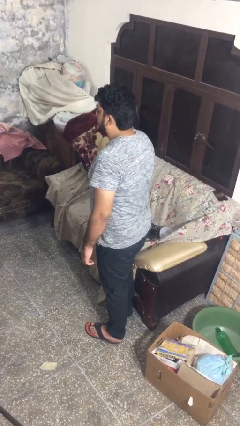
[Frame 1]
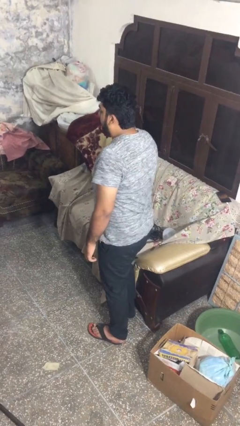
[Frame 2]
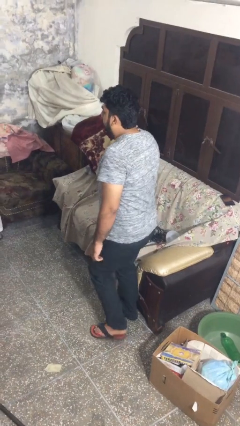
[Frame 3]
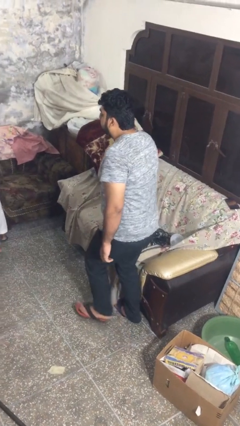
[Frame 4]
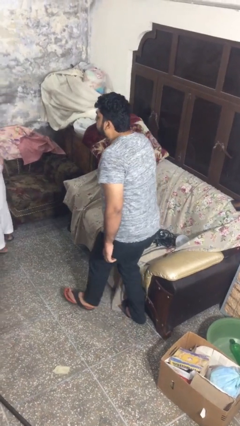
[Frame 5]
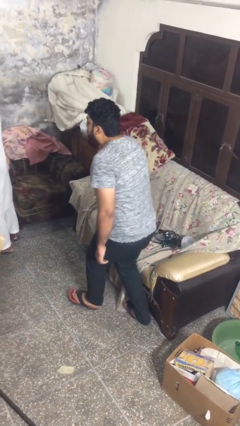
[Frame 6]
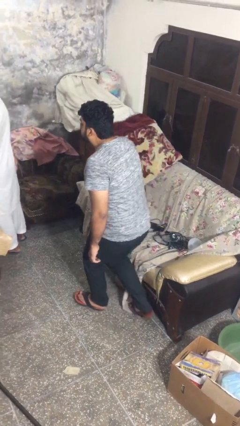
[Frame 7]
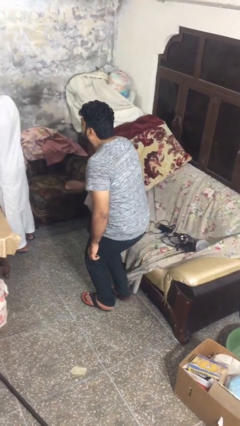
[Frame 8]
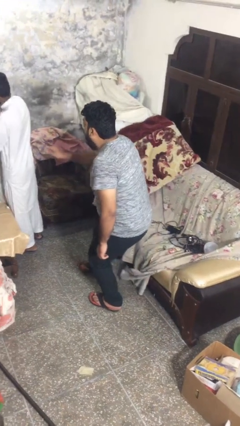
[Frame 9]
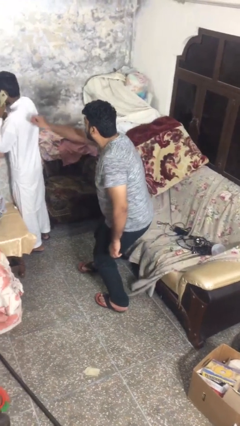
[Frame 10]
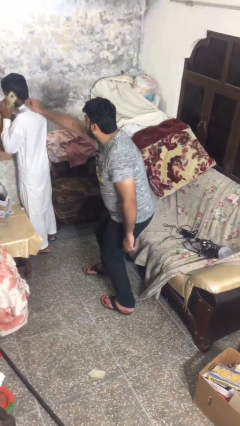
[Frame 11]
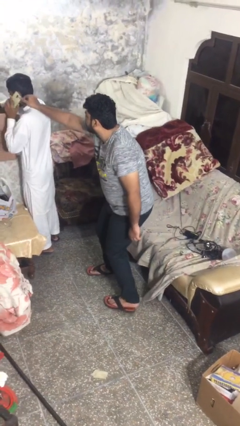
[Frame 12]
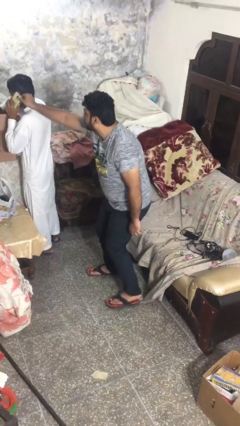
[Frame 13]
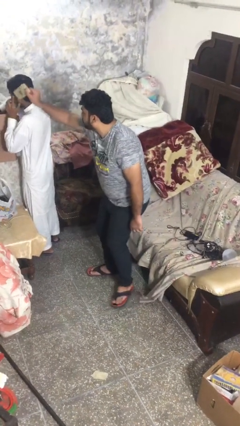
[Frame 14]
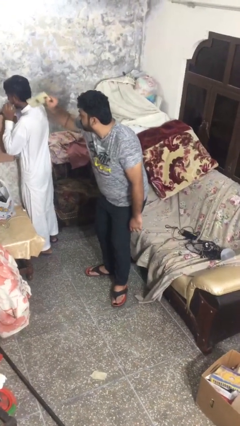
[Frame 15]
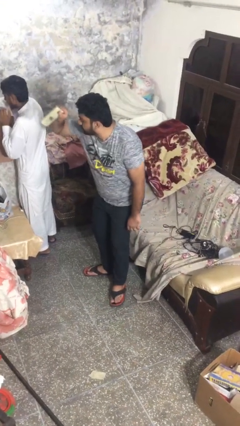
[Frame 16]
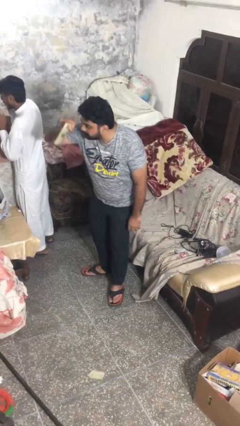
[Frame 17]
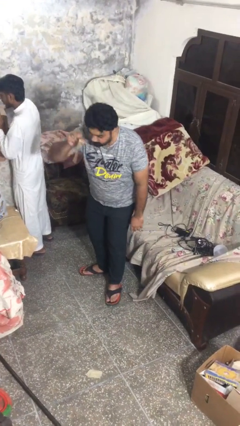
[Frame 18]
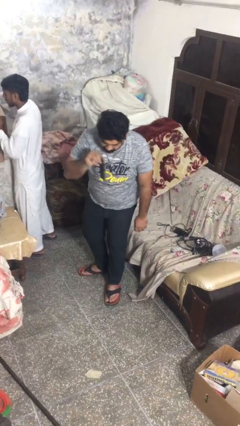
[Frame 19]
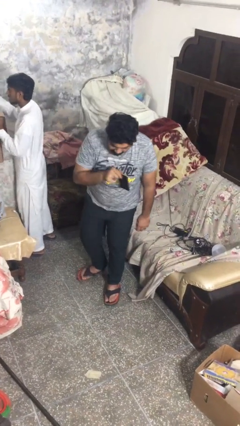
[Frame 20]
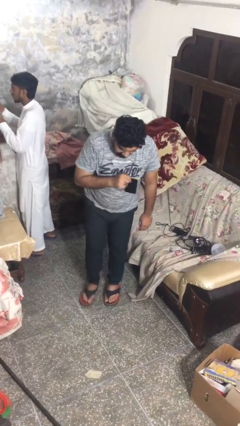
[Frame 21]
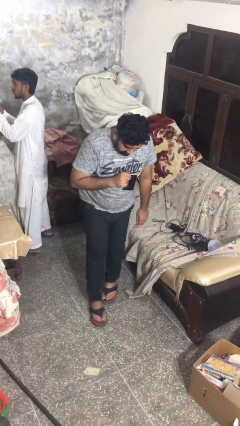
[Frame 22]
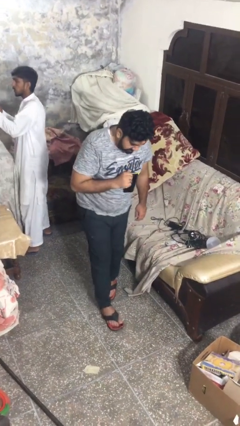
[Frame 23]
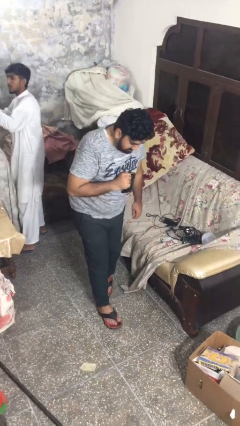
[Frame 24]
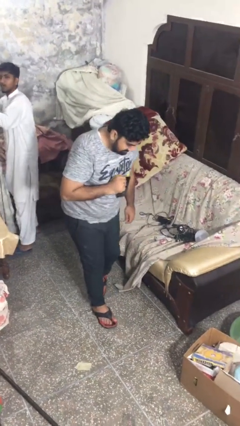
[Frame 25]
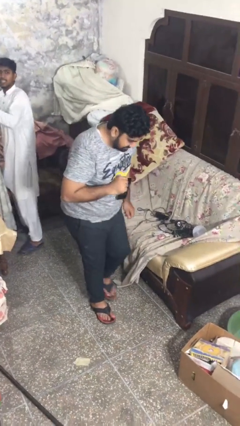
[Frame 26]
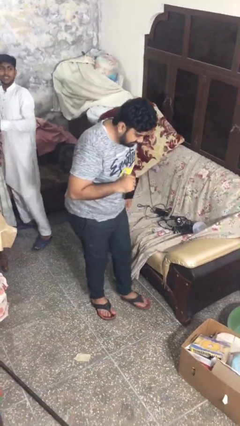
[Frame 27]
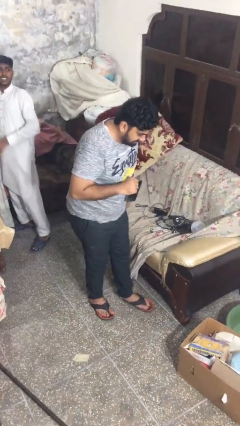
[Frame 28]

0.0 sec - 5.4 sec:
person steals object from person

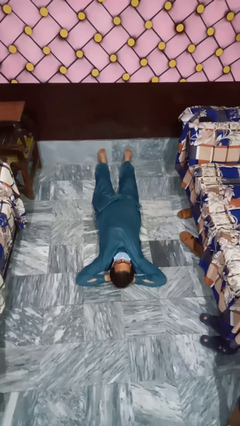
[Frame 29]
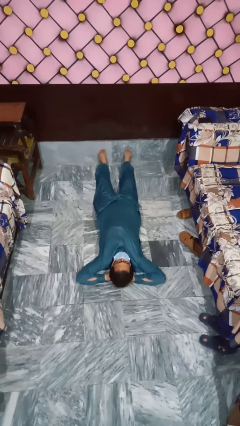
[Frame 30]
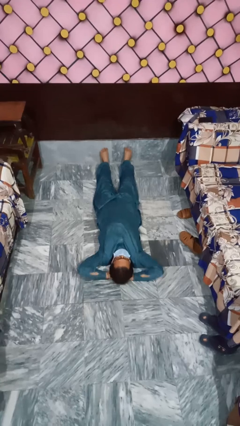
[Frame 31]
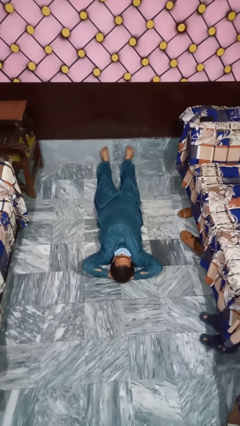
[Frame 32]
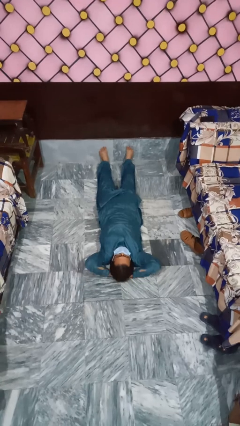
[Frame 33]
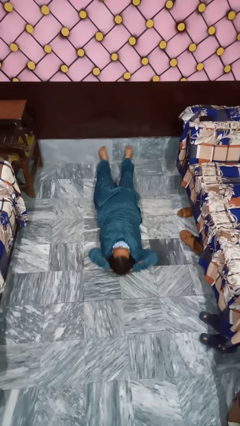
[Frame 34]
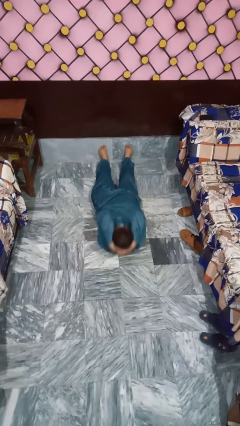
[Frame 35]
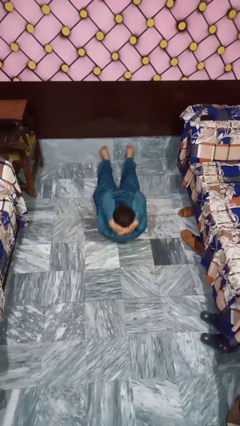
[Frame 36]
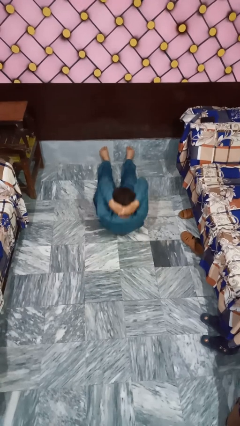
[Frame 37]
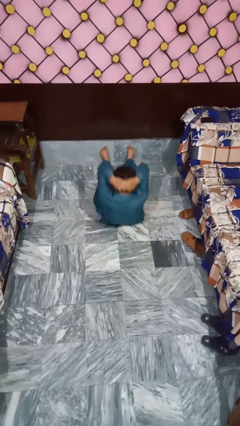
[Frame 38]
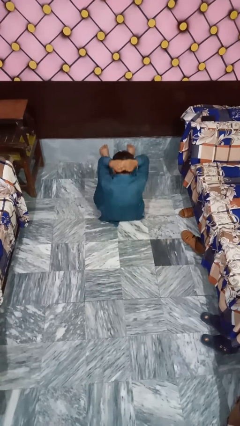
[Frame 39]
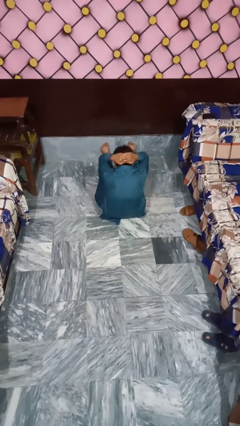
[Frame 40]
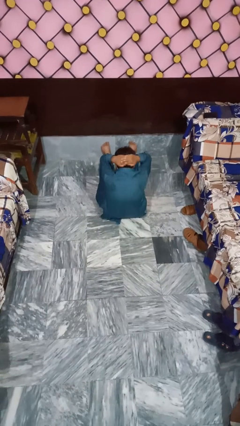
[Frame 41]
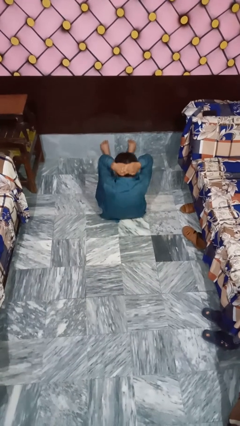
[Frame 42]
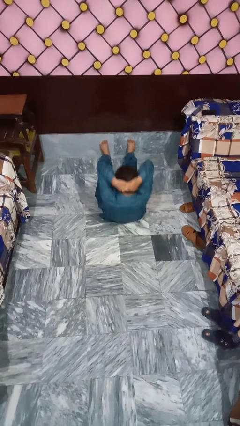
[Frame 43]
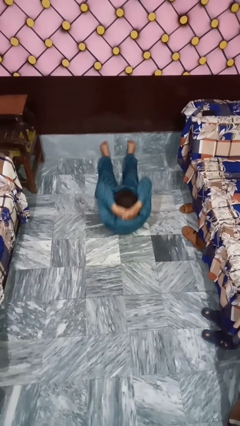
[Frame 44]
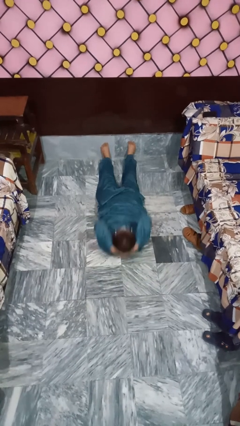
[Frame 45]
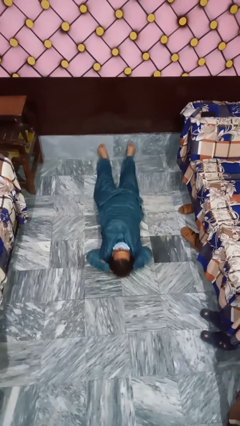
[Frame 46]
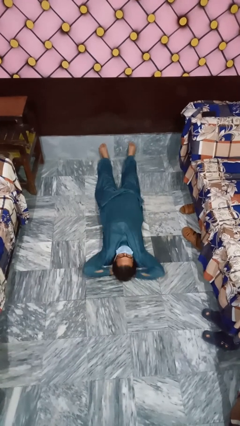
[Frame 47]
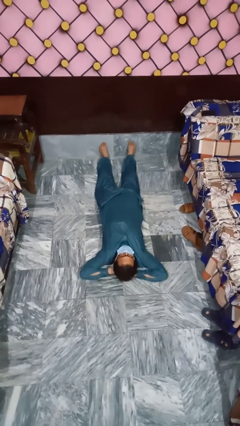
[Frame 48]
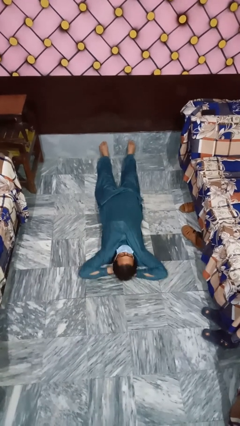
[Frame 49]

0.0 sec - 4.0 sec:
person exercises with situp

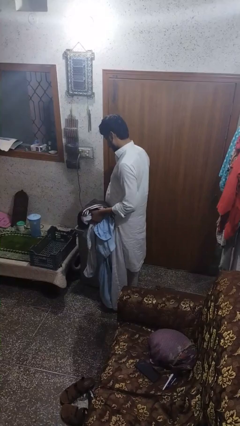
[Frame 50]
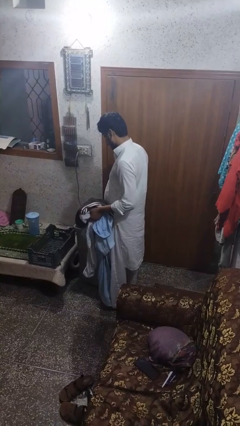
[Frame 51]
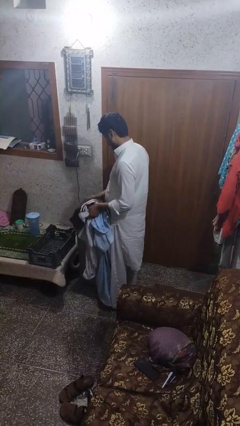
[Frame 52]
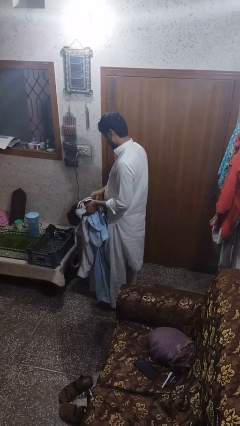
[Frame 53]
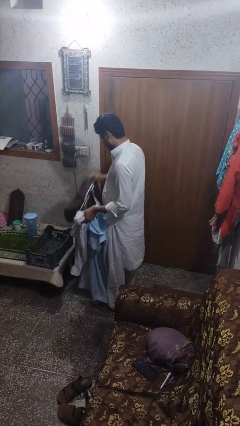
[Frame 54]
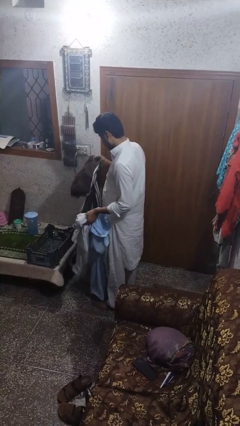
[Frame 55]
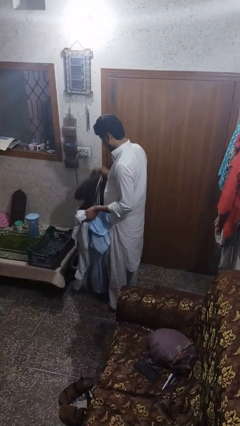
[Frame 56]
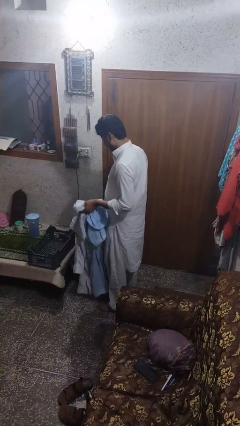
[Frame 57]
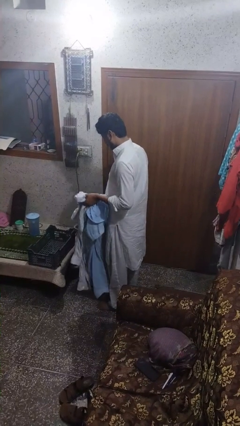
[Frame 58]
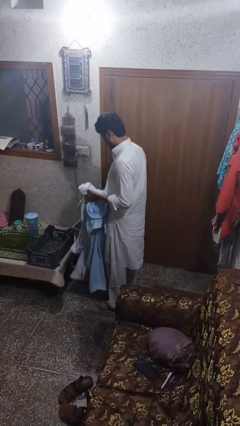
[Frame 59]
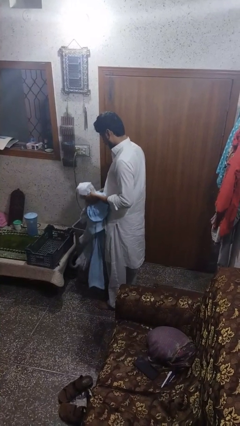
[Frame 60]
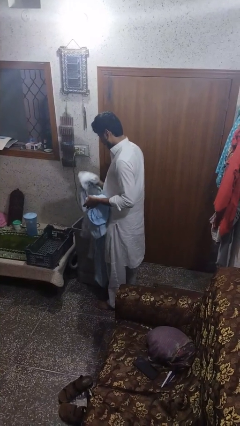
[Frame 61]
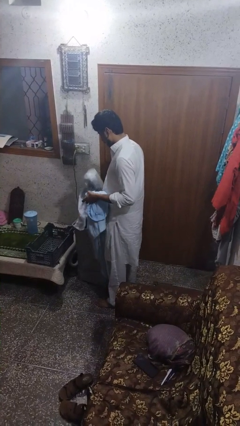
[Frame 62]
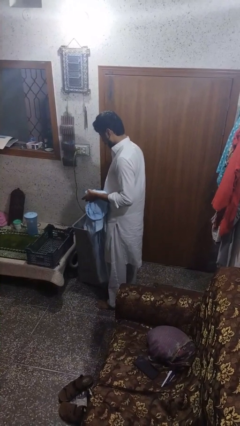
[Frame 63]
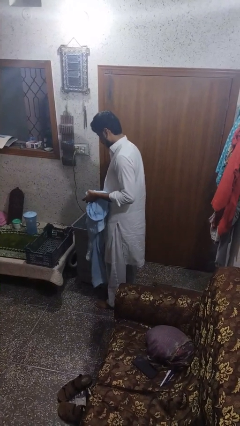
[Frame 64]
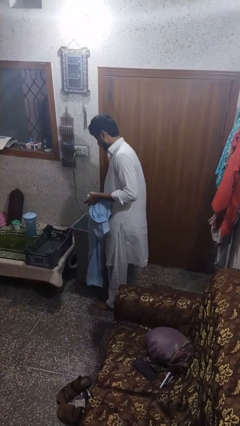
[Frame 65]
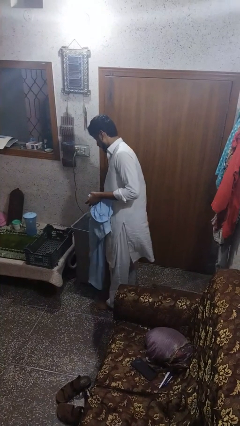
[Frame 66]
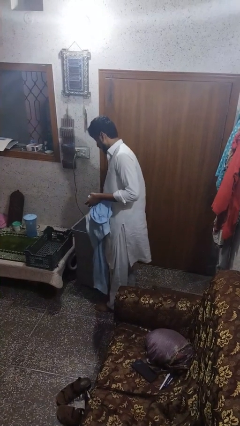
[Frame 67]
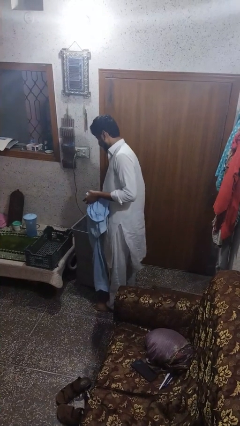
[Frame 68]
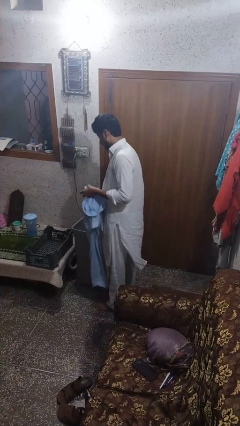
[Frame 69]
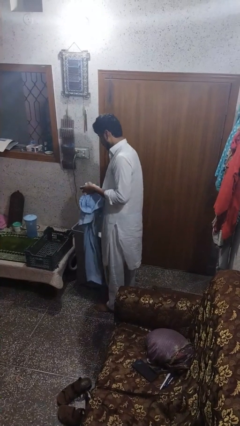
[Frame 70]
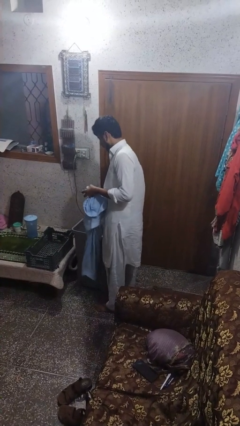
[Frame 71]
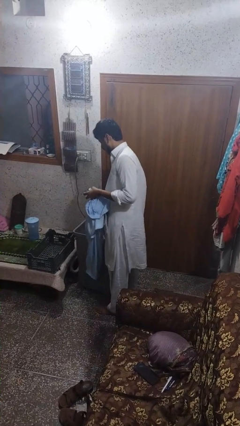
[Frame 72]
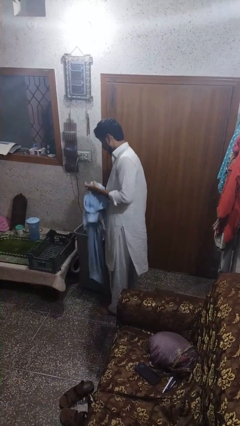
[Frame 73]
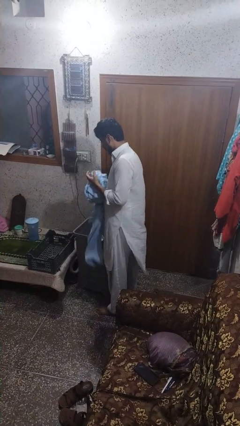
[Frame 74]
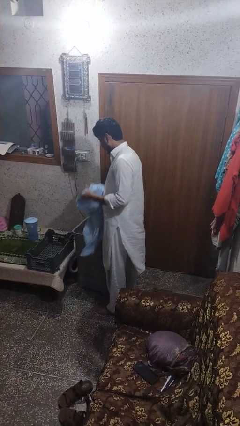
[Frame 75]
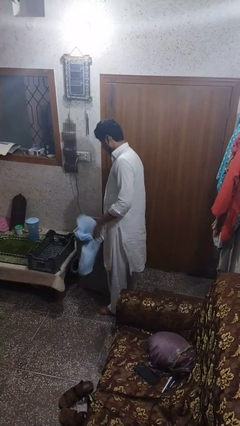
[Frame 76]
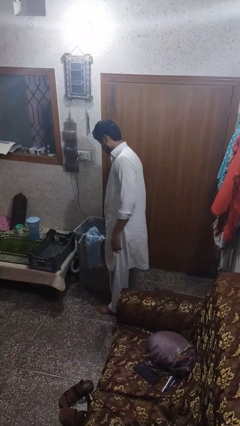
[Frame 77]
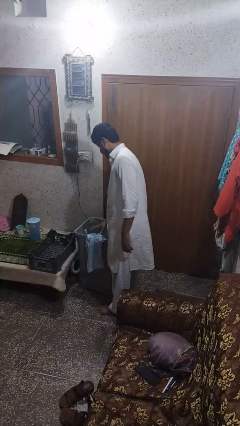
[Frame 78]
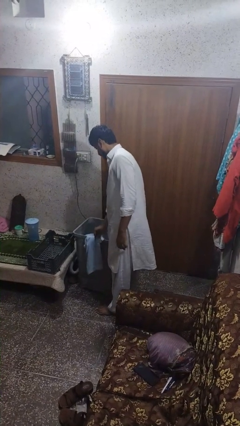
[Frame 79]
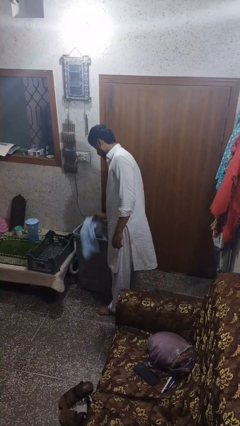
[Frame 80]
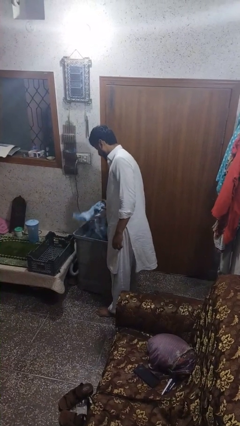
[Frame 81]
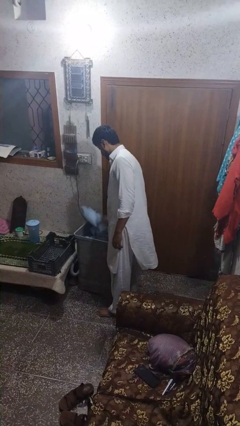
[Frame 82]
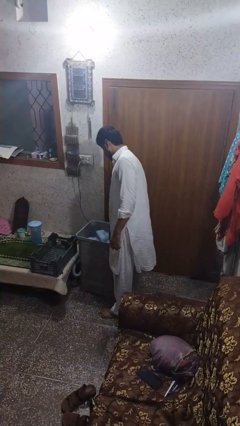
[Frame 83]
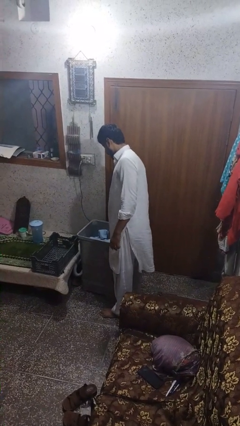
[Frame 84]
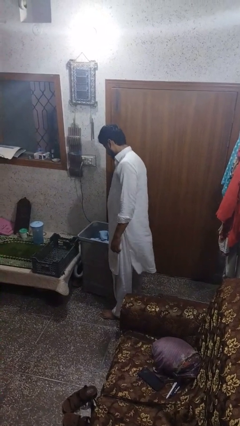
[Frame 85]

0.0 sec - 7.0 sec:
person loads dryer

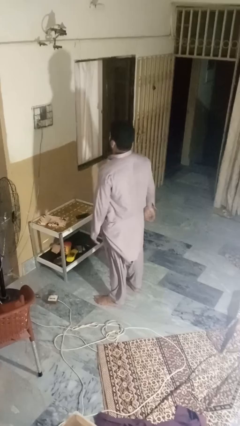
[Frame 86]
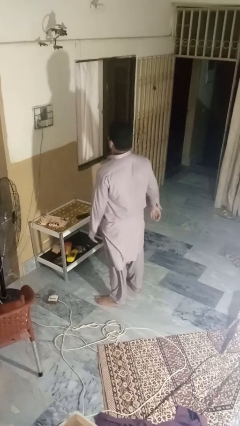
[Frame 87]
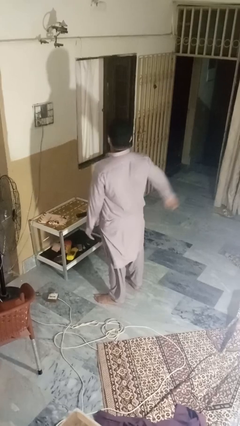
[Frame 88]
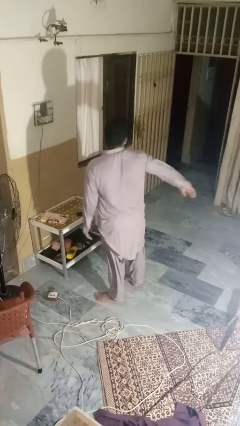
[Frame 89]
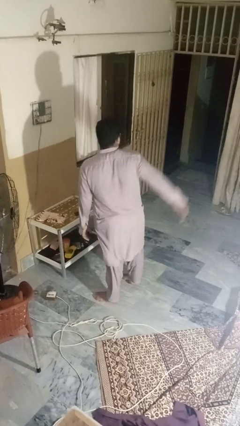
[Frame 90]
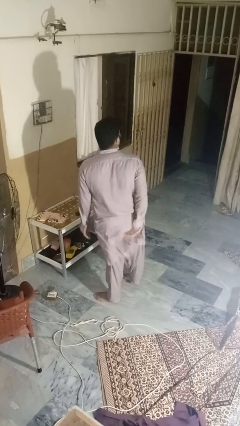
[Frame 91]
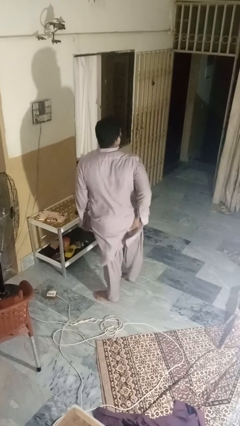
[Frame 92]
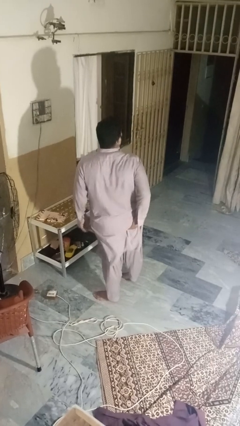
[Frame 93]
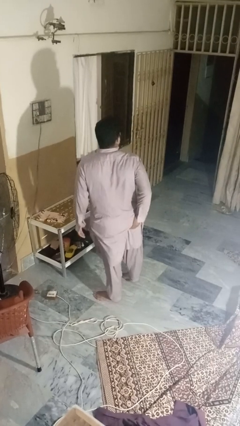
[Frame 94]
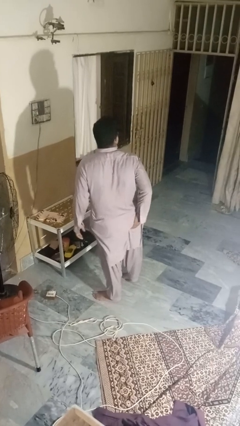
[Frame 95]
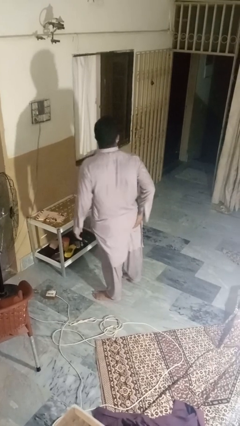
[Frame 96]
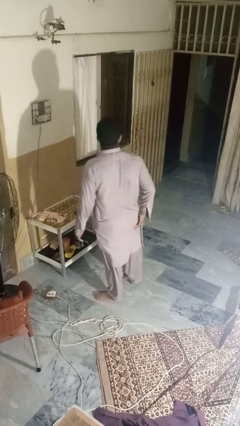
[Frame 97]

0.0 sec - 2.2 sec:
person wiggles hips
